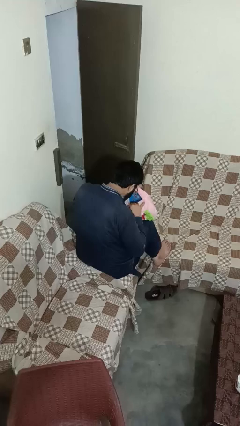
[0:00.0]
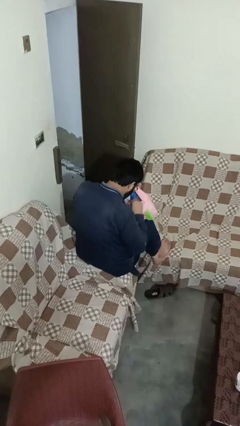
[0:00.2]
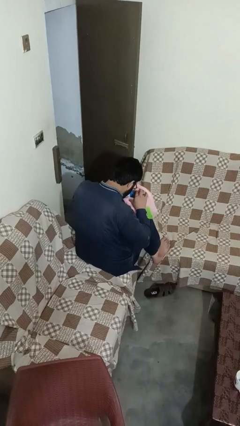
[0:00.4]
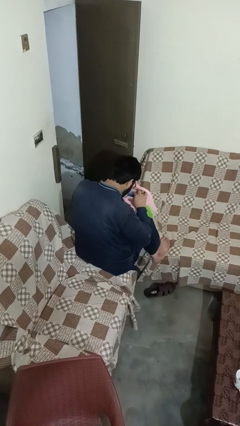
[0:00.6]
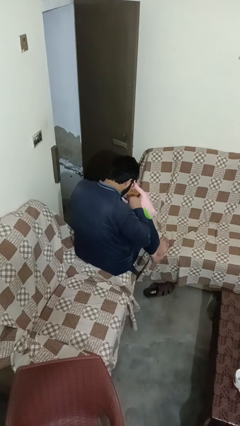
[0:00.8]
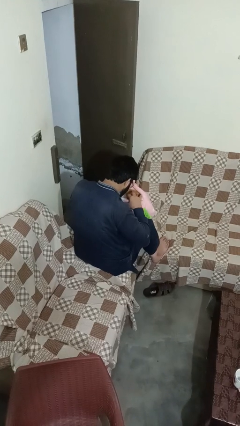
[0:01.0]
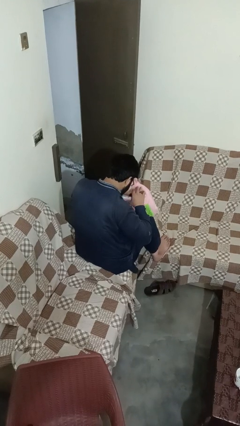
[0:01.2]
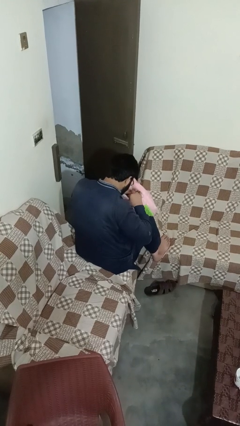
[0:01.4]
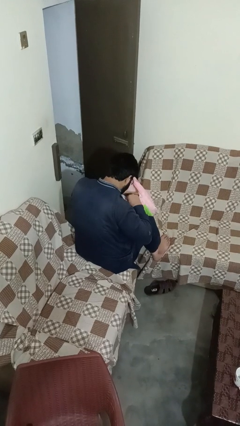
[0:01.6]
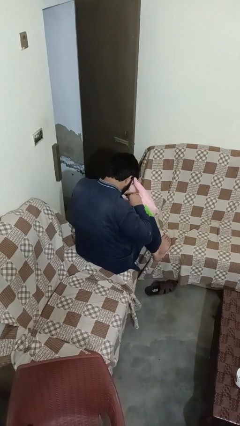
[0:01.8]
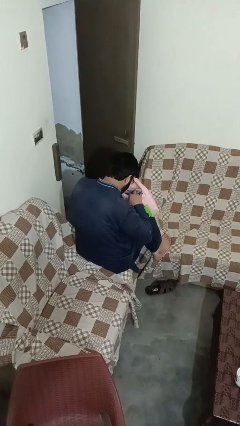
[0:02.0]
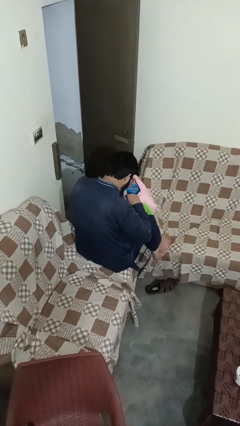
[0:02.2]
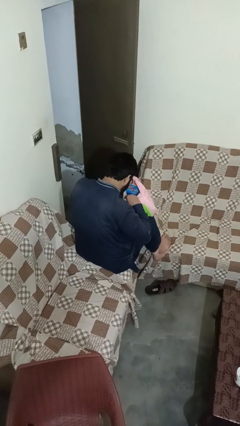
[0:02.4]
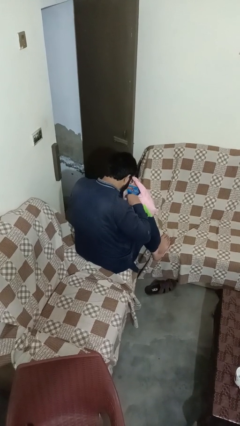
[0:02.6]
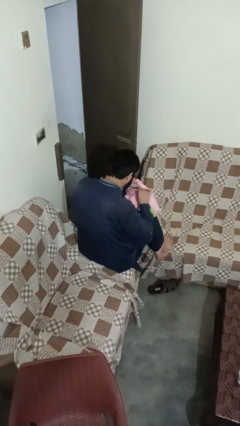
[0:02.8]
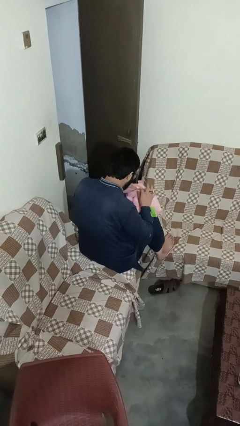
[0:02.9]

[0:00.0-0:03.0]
person searches in bag

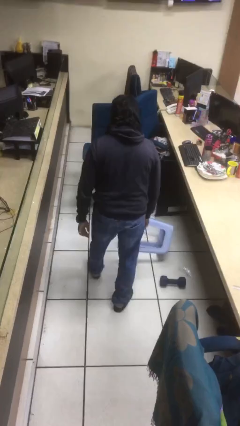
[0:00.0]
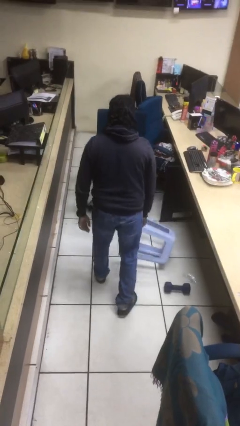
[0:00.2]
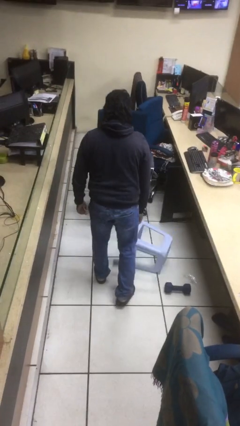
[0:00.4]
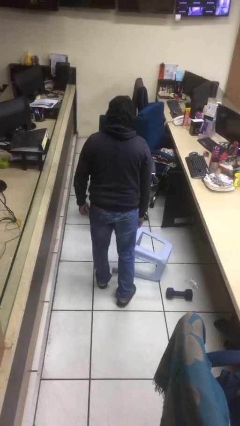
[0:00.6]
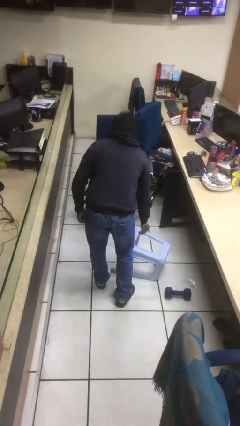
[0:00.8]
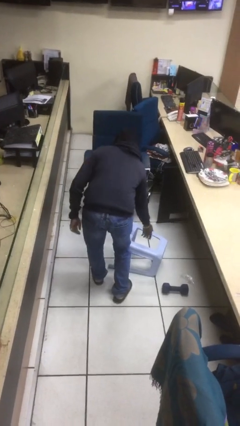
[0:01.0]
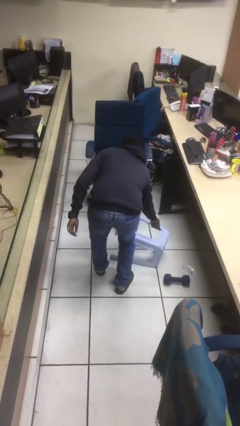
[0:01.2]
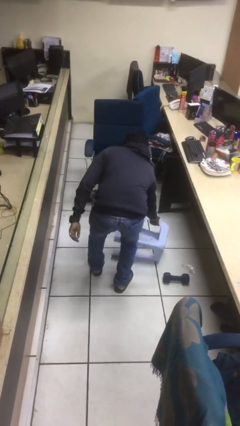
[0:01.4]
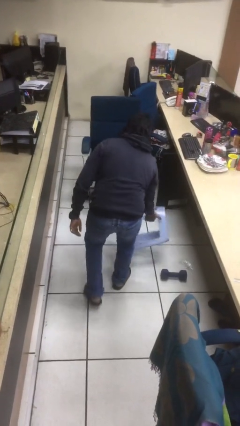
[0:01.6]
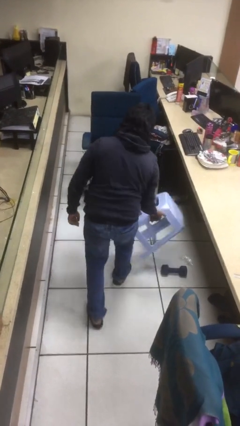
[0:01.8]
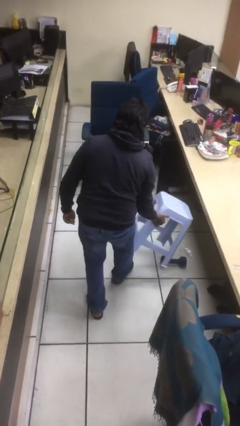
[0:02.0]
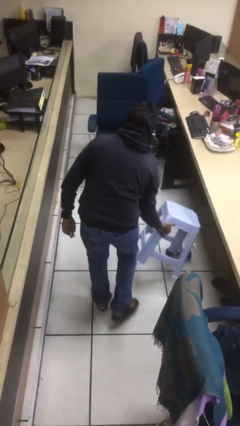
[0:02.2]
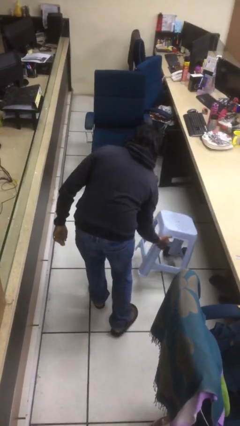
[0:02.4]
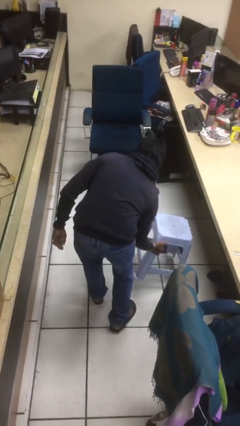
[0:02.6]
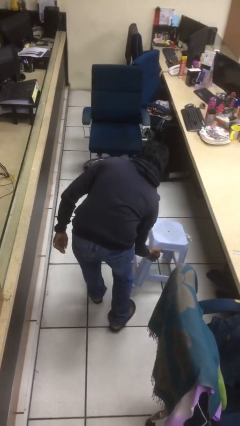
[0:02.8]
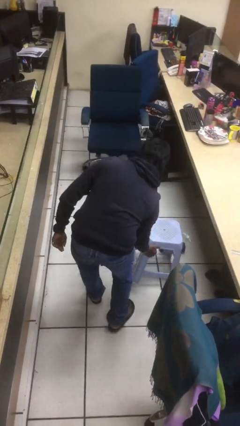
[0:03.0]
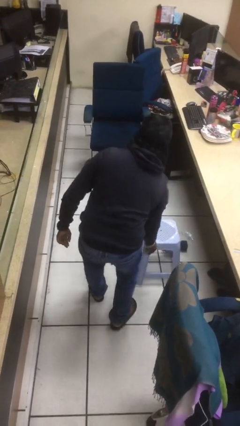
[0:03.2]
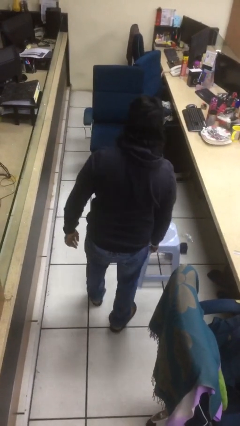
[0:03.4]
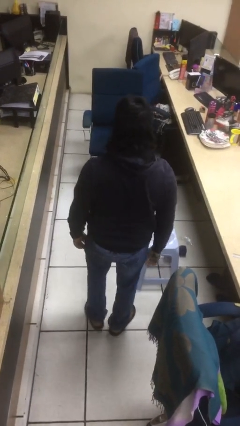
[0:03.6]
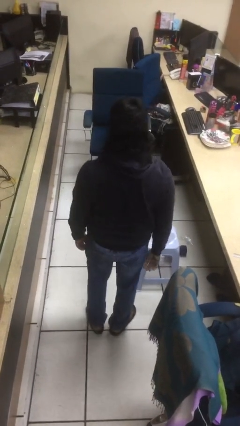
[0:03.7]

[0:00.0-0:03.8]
person sets upright furniture

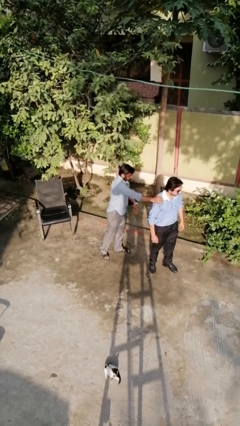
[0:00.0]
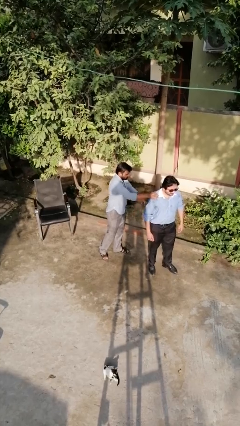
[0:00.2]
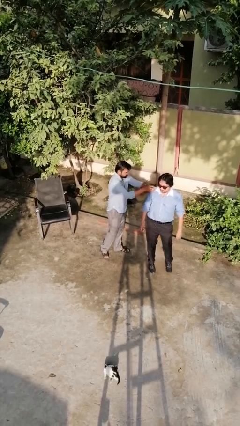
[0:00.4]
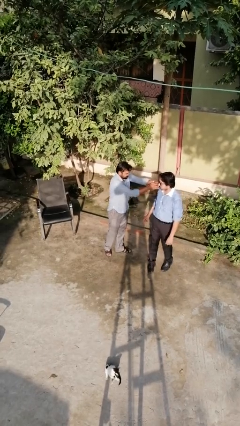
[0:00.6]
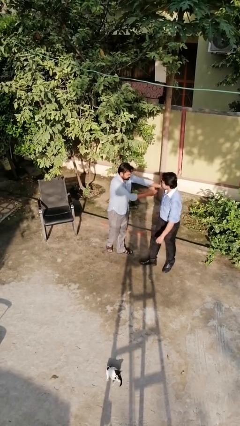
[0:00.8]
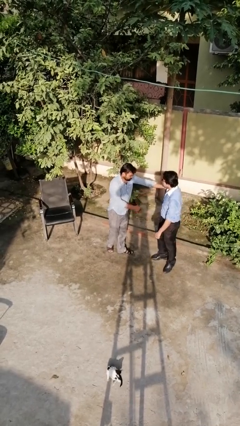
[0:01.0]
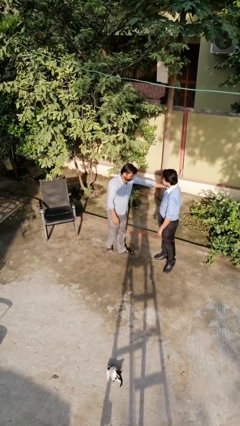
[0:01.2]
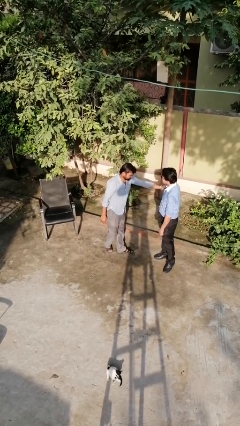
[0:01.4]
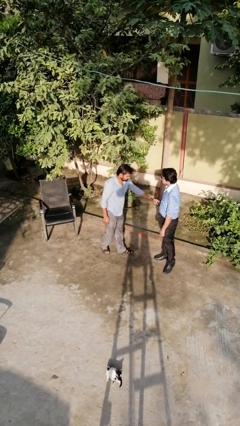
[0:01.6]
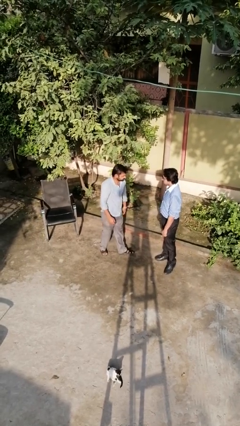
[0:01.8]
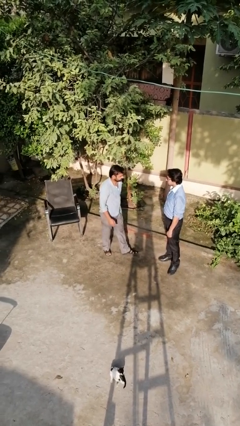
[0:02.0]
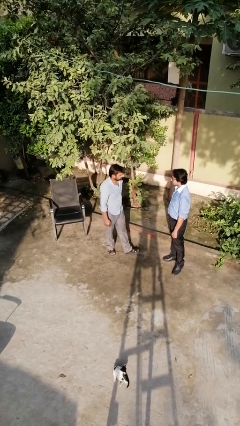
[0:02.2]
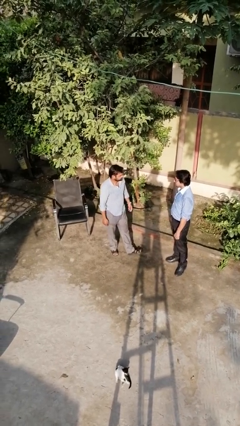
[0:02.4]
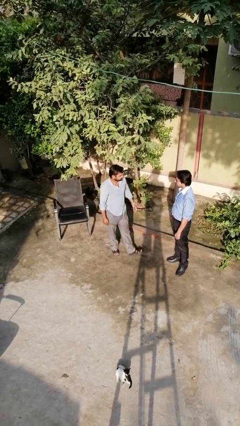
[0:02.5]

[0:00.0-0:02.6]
person spins person around

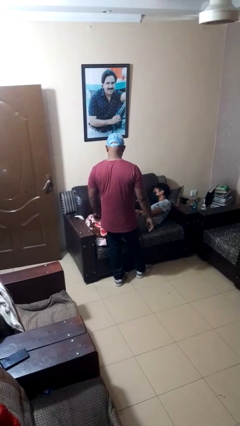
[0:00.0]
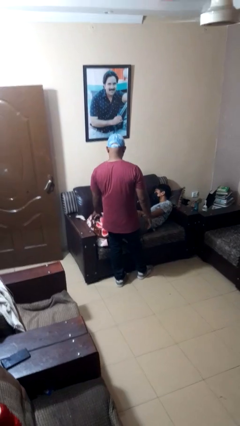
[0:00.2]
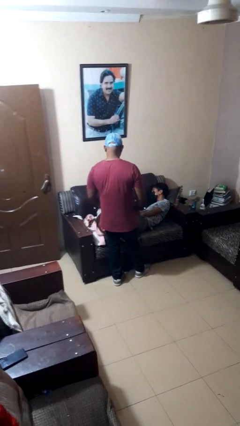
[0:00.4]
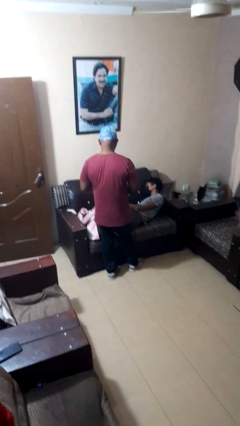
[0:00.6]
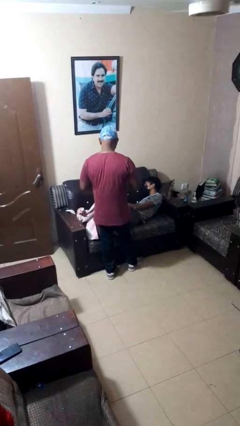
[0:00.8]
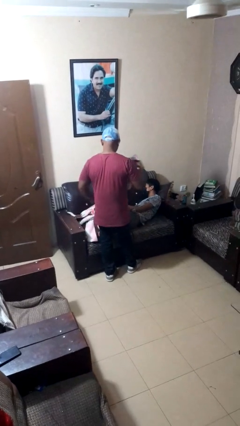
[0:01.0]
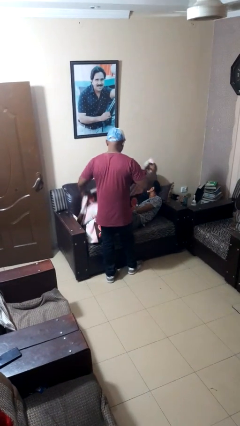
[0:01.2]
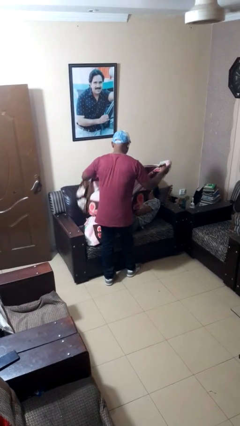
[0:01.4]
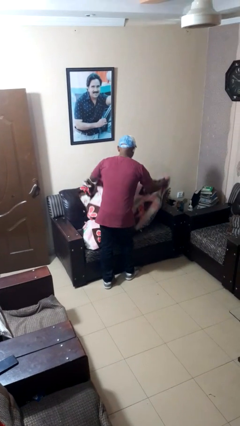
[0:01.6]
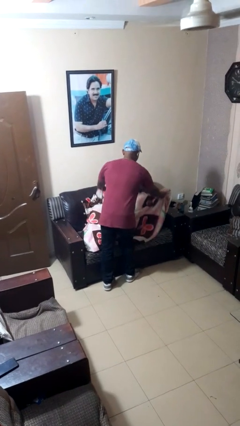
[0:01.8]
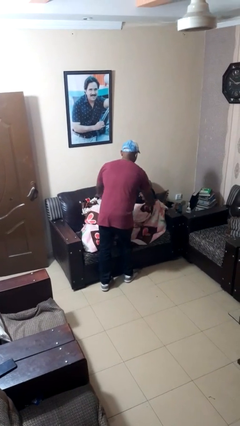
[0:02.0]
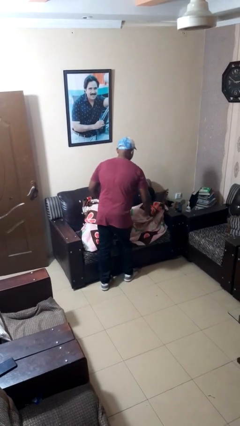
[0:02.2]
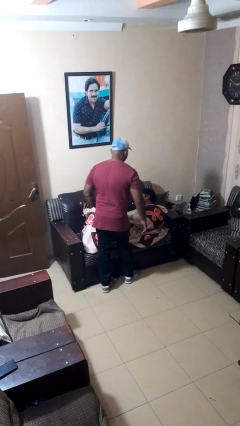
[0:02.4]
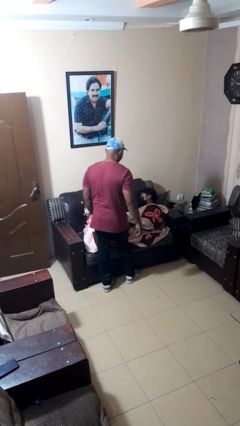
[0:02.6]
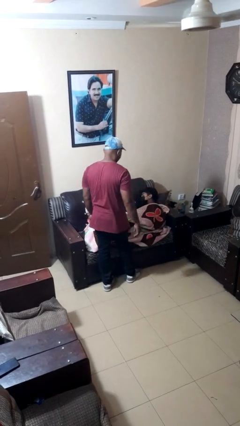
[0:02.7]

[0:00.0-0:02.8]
person covers friend with blanket

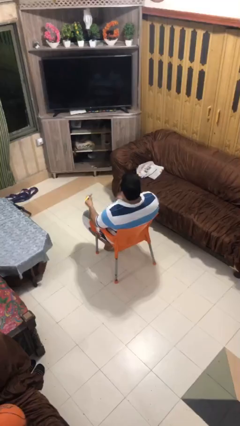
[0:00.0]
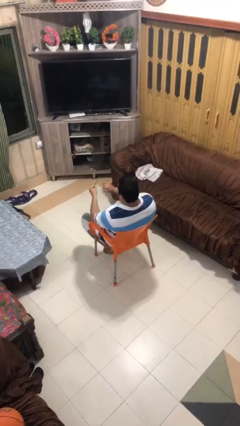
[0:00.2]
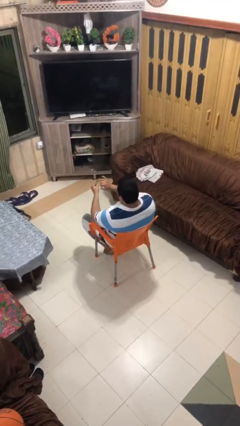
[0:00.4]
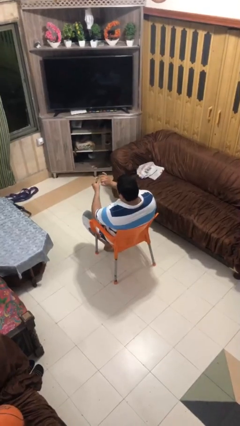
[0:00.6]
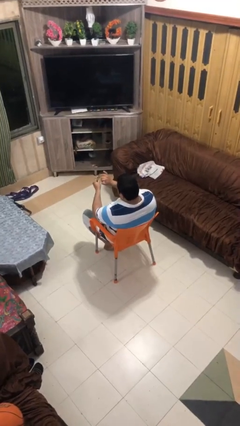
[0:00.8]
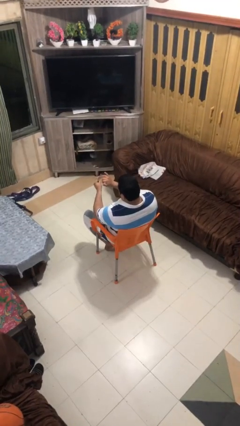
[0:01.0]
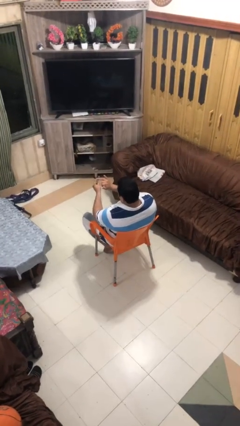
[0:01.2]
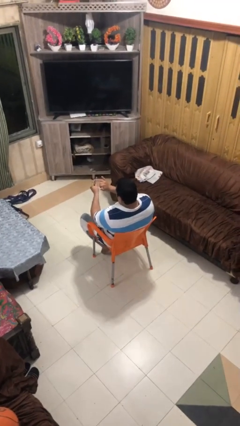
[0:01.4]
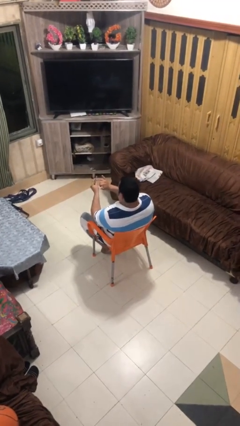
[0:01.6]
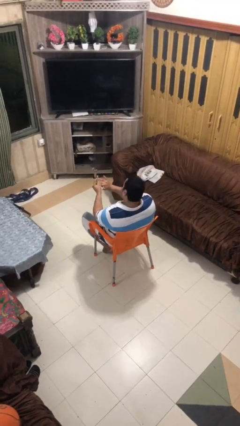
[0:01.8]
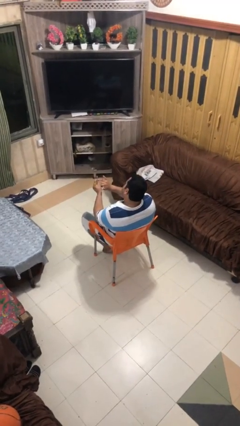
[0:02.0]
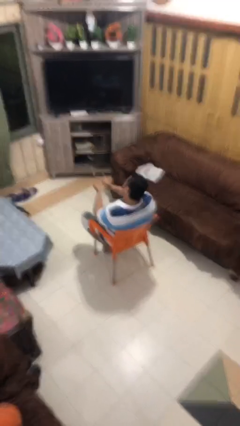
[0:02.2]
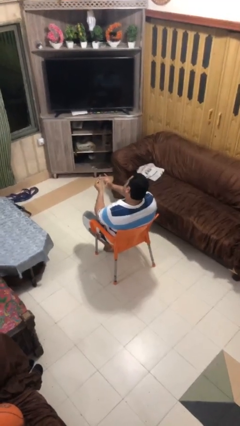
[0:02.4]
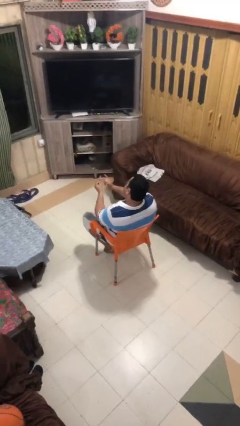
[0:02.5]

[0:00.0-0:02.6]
person files fingernails

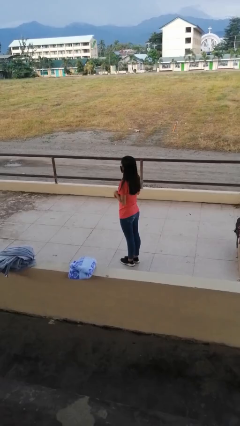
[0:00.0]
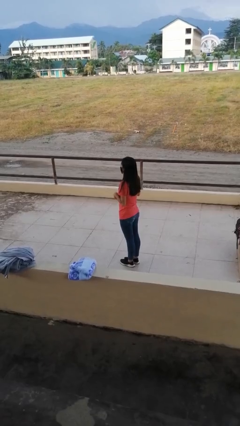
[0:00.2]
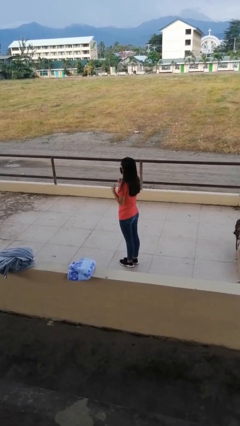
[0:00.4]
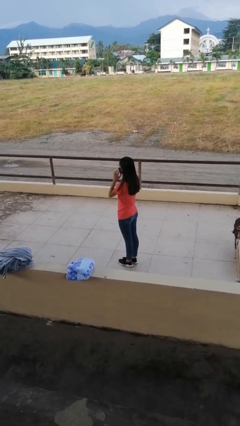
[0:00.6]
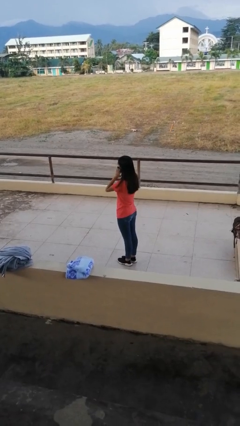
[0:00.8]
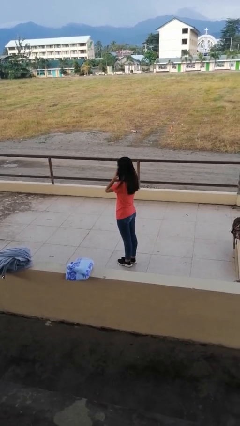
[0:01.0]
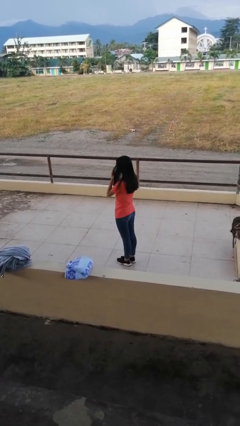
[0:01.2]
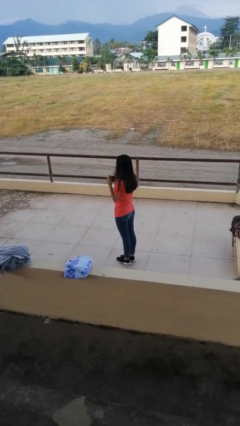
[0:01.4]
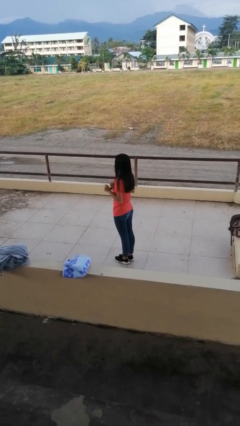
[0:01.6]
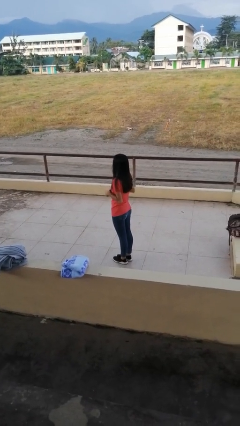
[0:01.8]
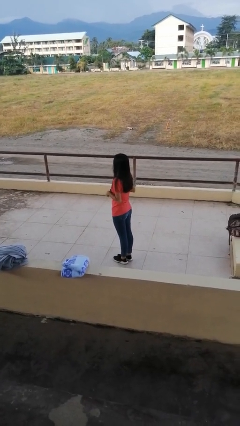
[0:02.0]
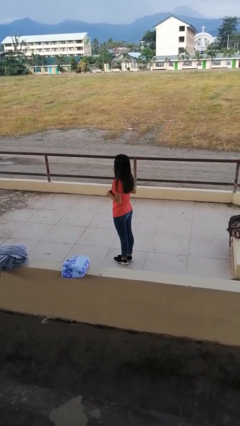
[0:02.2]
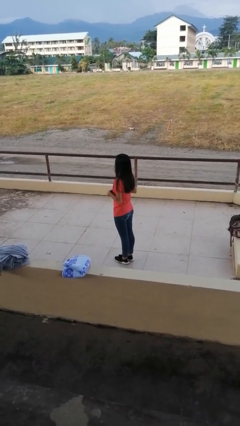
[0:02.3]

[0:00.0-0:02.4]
person takes off facemask
